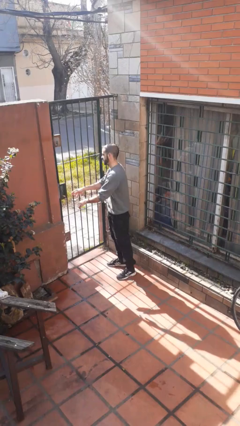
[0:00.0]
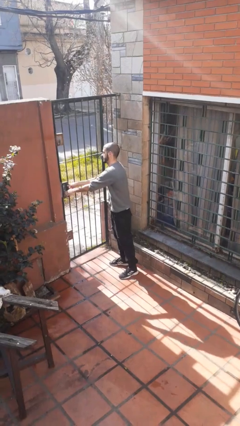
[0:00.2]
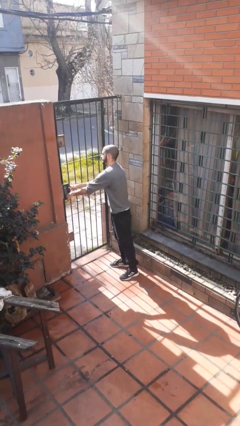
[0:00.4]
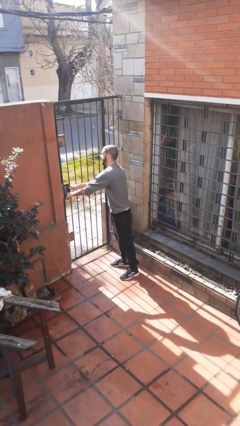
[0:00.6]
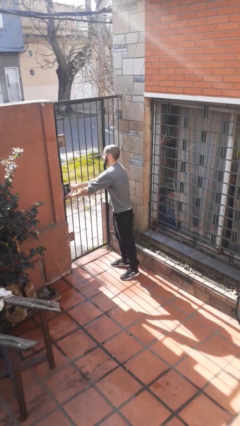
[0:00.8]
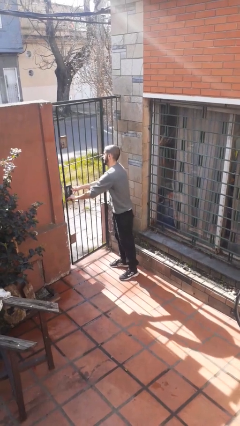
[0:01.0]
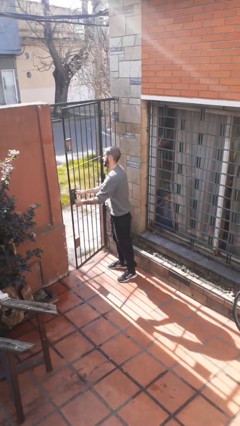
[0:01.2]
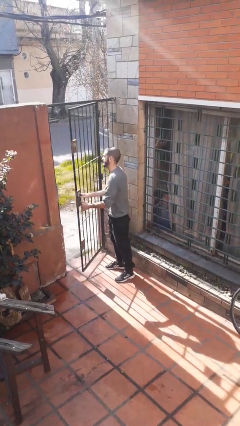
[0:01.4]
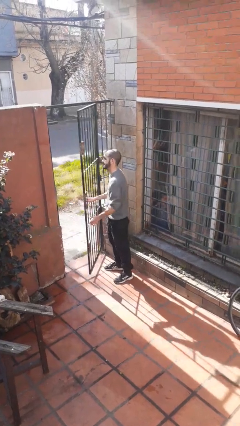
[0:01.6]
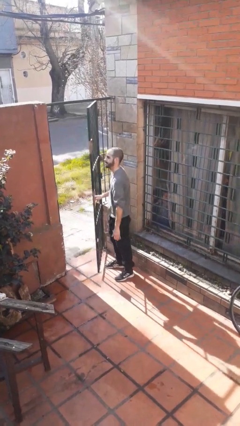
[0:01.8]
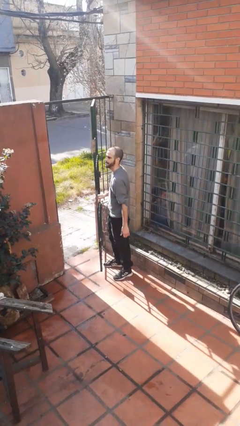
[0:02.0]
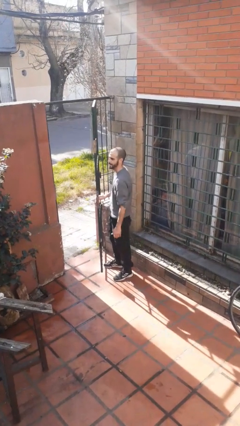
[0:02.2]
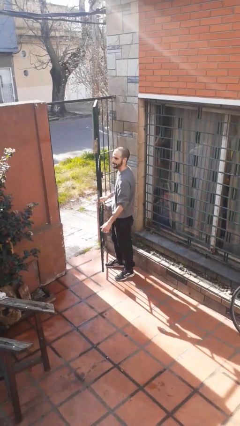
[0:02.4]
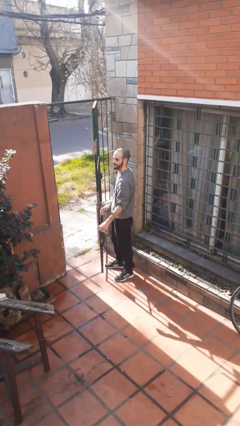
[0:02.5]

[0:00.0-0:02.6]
person opens gate

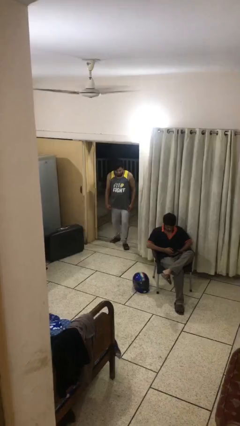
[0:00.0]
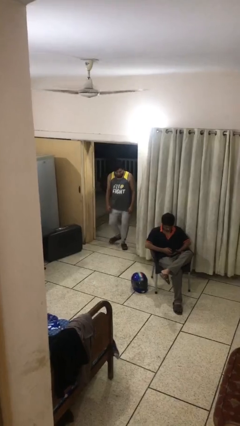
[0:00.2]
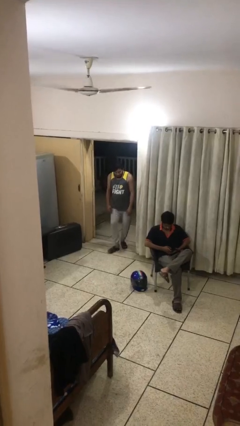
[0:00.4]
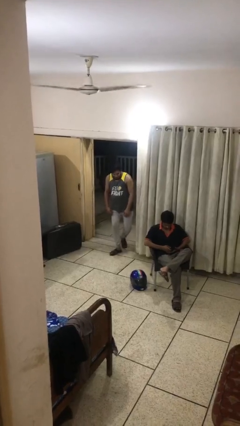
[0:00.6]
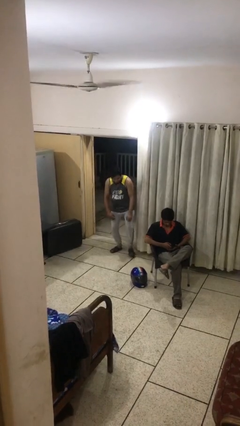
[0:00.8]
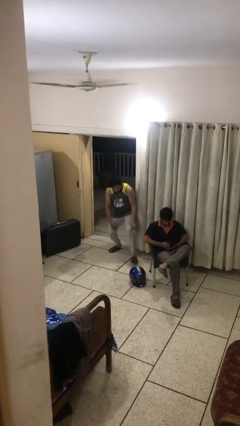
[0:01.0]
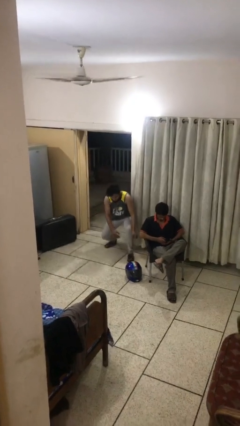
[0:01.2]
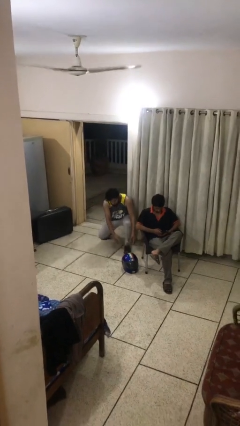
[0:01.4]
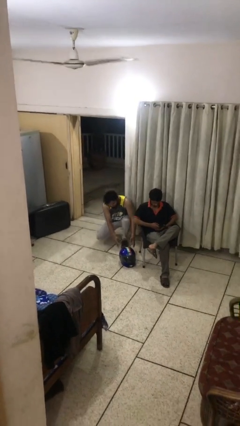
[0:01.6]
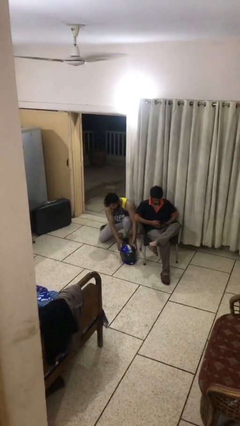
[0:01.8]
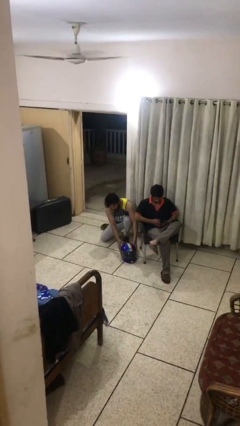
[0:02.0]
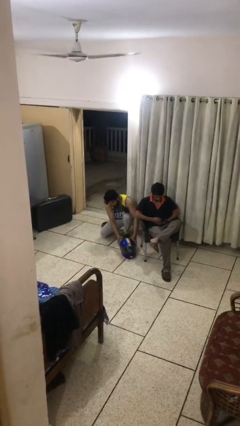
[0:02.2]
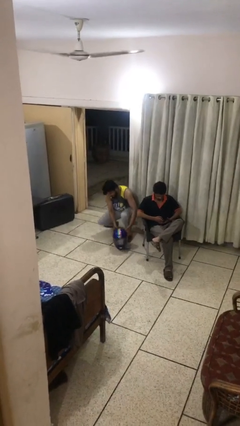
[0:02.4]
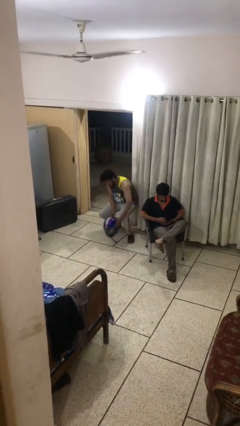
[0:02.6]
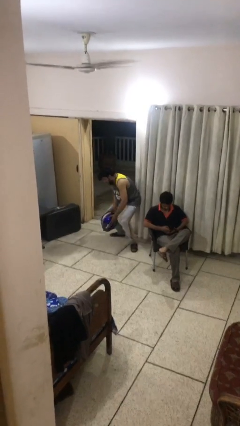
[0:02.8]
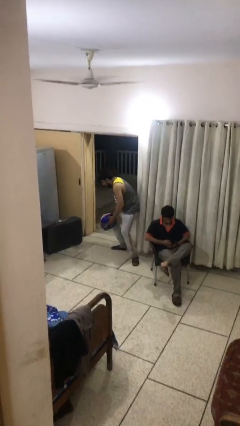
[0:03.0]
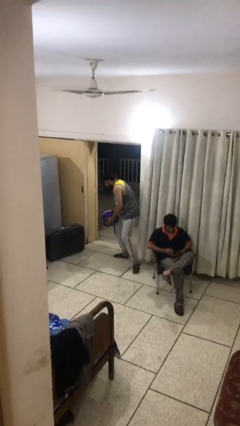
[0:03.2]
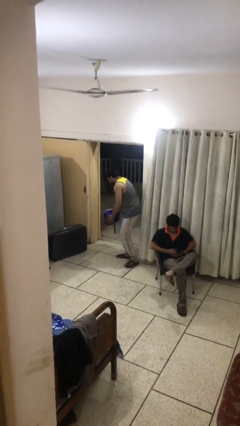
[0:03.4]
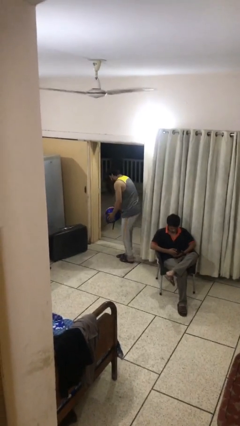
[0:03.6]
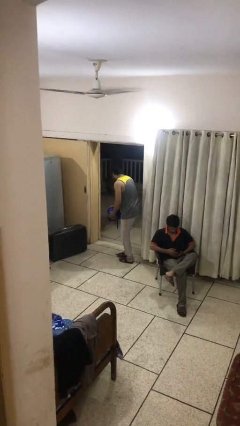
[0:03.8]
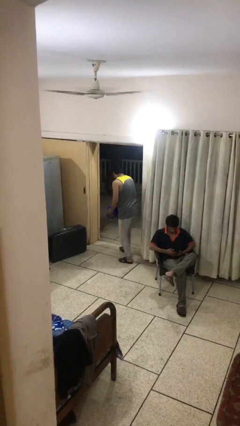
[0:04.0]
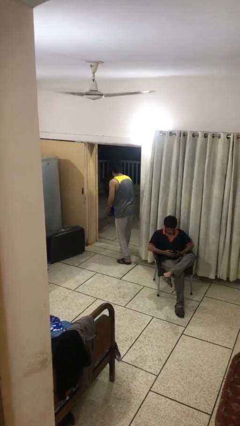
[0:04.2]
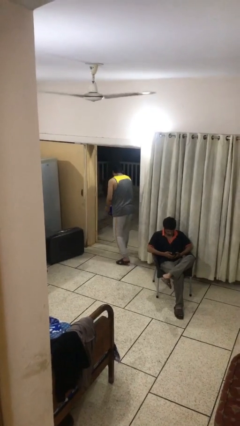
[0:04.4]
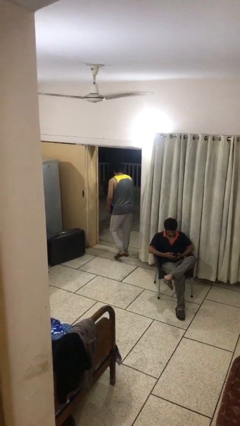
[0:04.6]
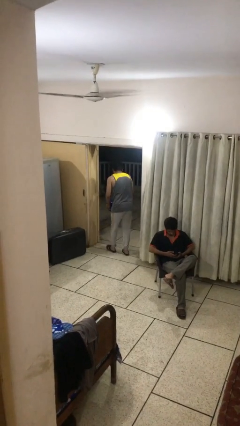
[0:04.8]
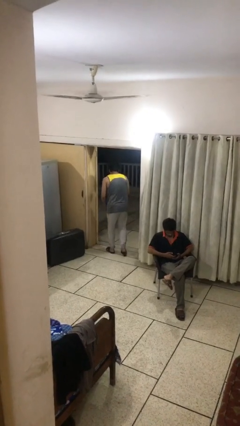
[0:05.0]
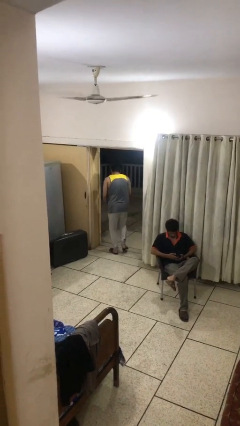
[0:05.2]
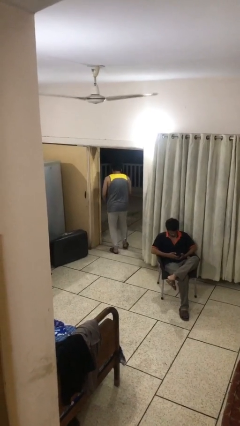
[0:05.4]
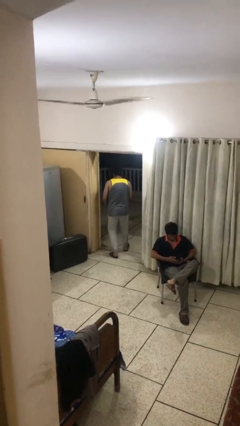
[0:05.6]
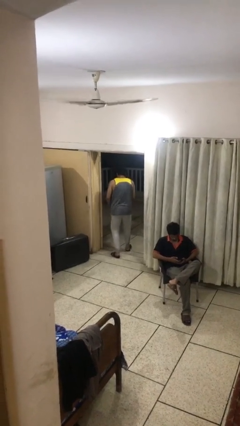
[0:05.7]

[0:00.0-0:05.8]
person steals object from person

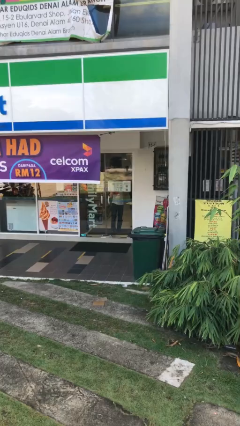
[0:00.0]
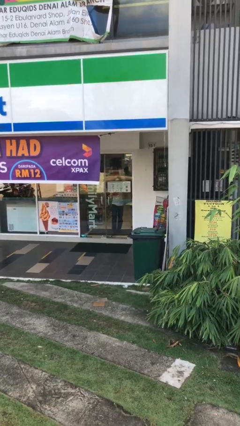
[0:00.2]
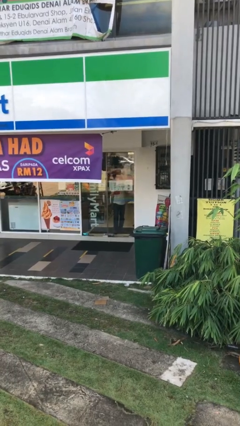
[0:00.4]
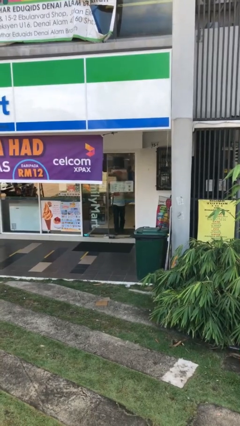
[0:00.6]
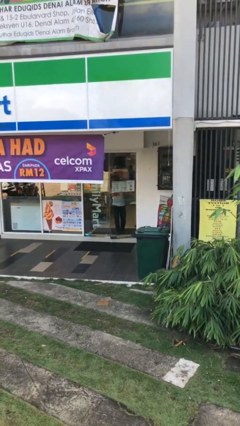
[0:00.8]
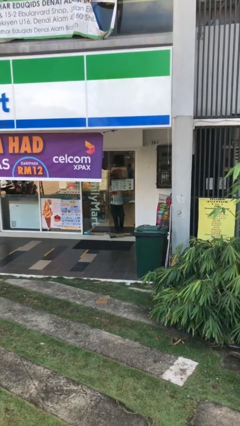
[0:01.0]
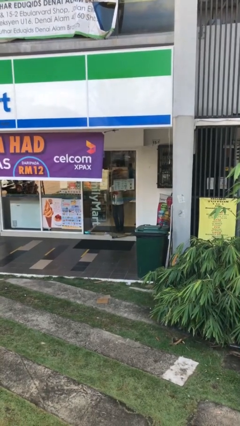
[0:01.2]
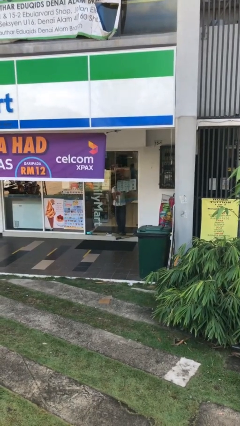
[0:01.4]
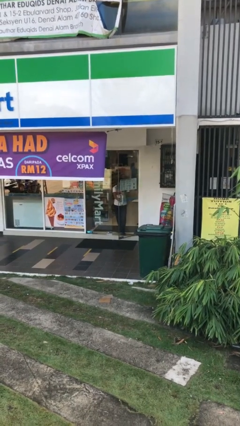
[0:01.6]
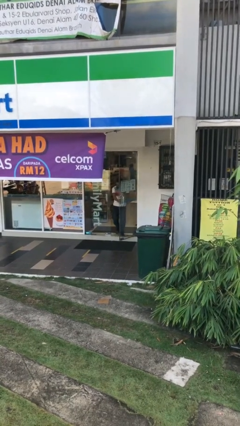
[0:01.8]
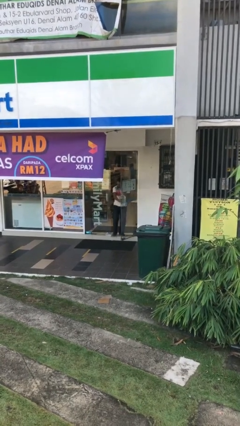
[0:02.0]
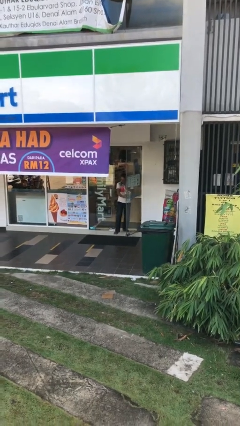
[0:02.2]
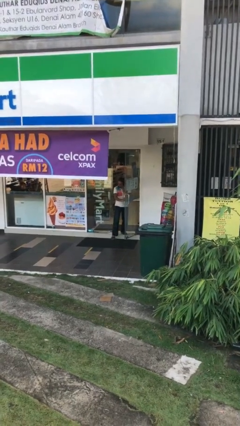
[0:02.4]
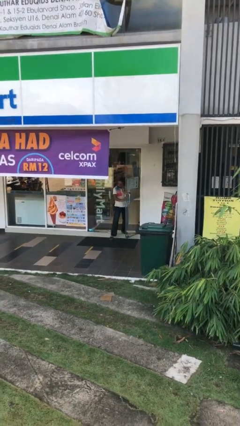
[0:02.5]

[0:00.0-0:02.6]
person opens facility door

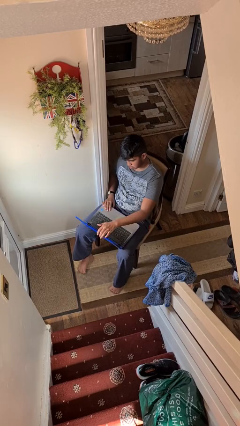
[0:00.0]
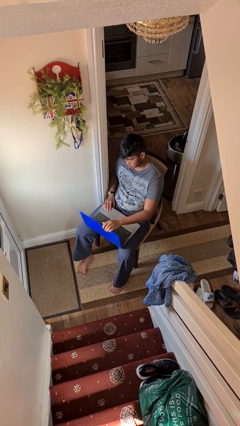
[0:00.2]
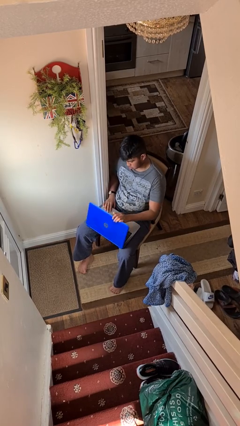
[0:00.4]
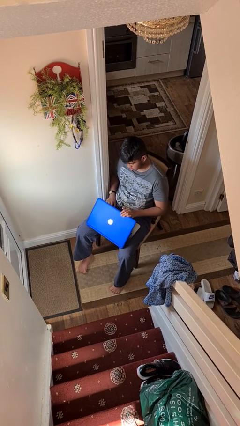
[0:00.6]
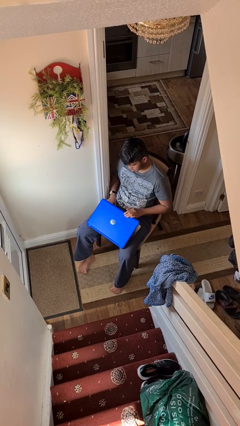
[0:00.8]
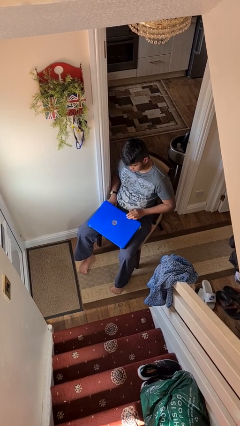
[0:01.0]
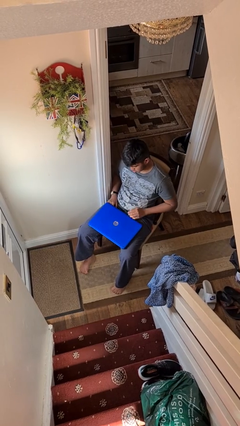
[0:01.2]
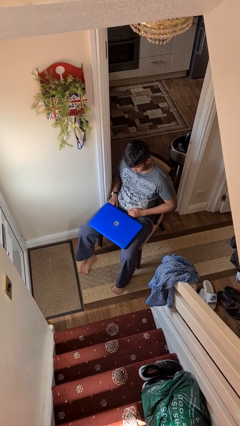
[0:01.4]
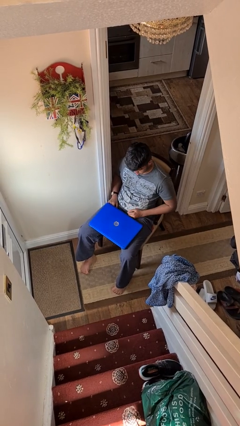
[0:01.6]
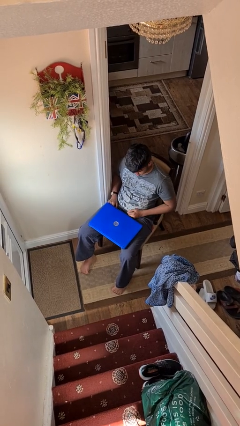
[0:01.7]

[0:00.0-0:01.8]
person closes laptop

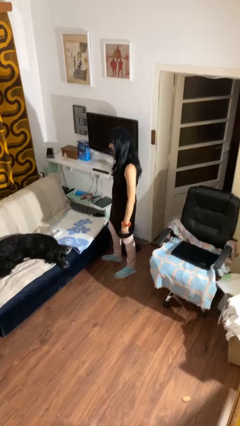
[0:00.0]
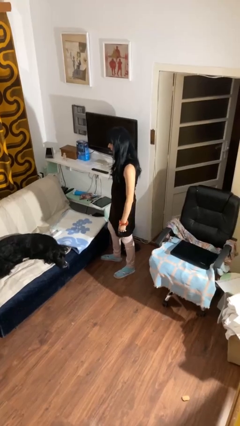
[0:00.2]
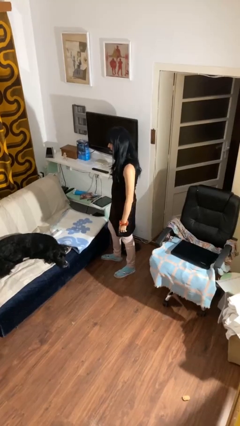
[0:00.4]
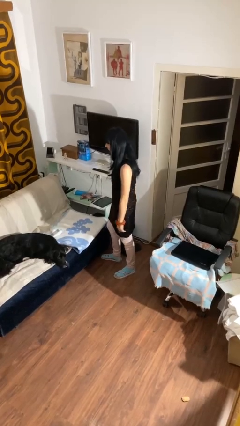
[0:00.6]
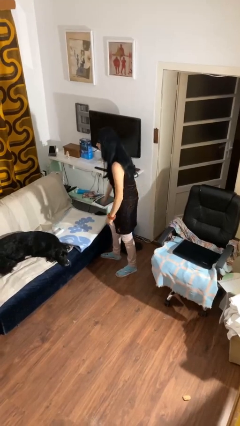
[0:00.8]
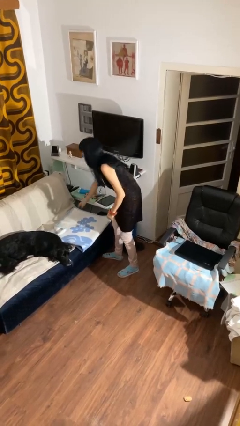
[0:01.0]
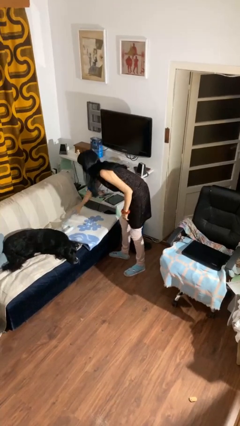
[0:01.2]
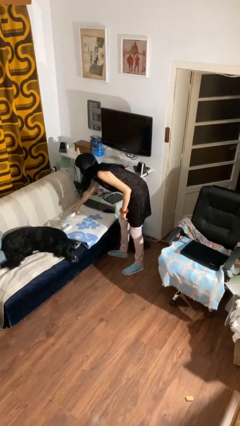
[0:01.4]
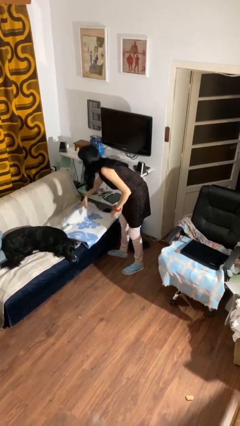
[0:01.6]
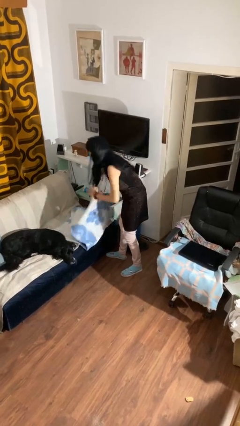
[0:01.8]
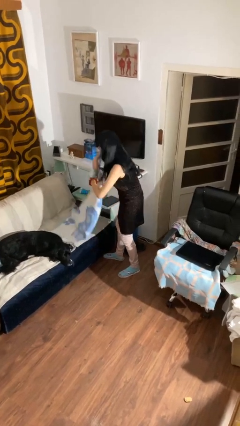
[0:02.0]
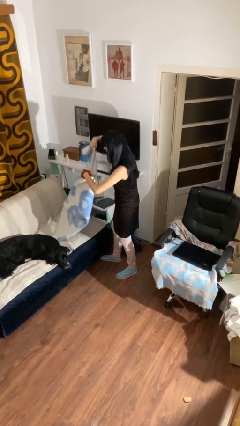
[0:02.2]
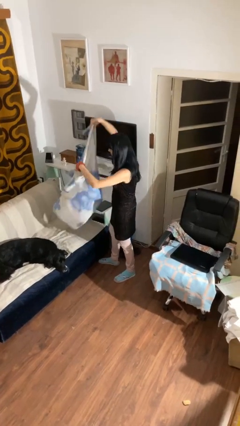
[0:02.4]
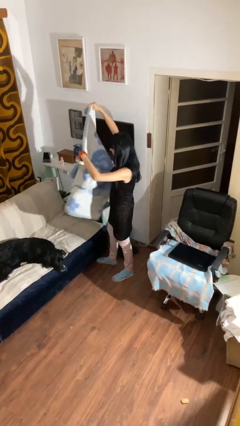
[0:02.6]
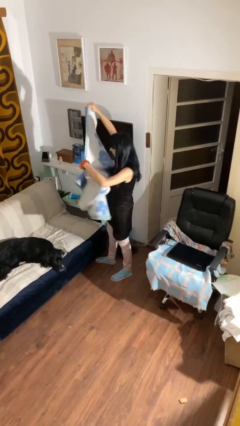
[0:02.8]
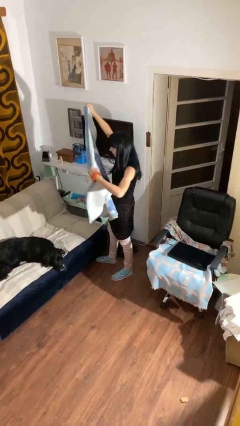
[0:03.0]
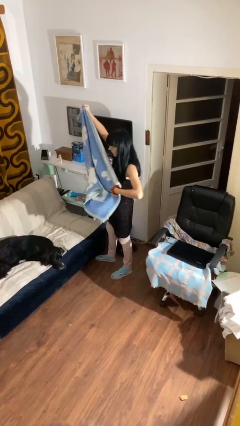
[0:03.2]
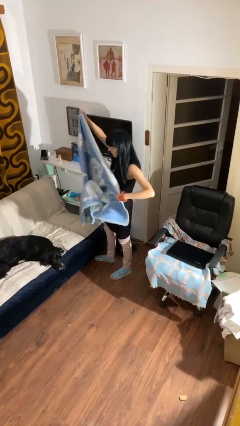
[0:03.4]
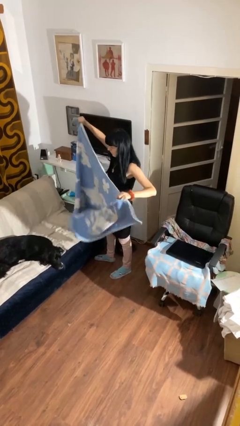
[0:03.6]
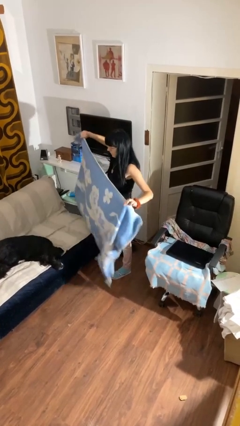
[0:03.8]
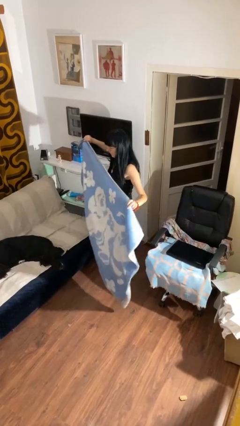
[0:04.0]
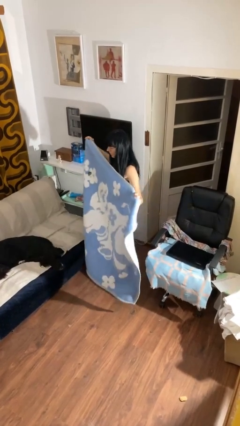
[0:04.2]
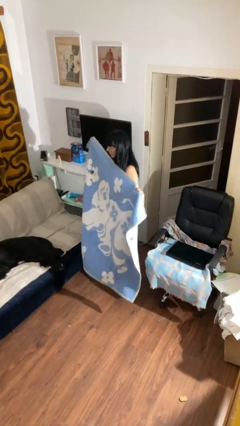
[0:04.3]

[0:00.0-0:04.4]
person unfolds blanket

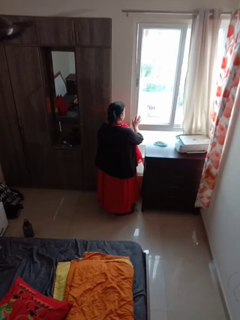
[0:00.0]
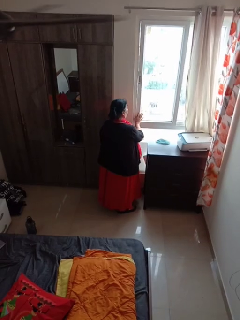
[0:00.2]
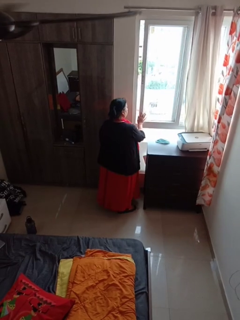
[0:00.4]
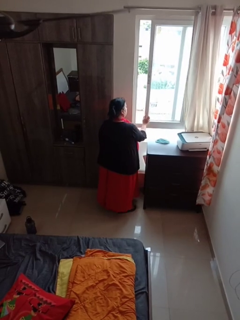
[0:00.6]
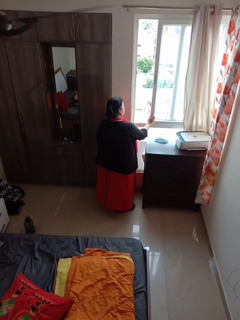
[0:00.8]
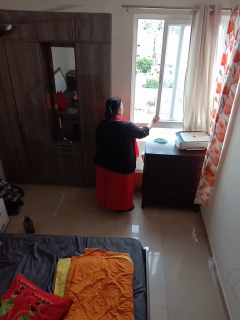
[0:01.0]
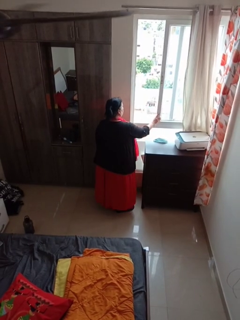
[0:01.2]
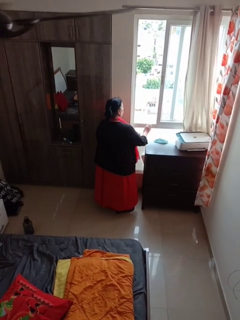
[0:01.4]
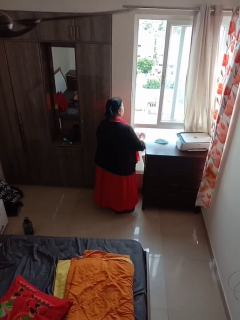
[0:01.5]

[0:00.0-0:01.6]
person opens home window
